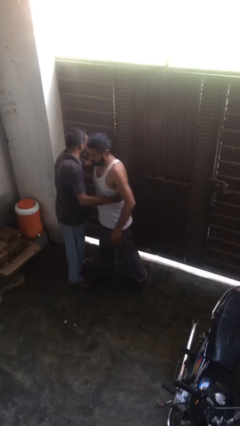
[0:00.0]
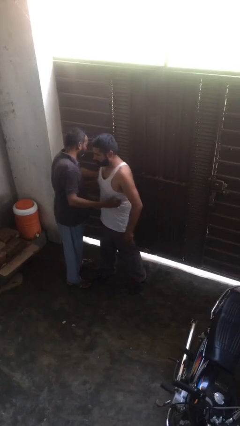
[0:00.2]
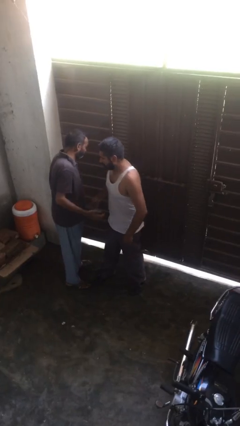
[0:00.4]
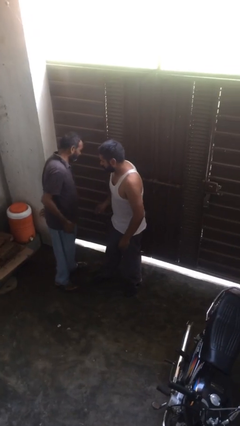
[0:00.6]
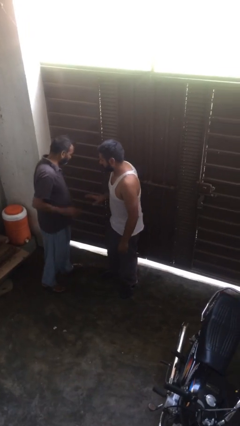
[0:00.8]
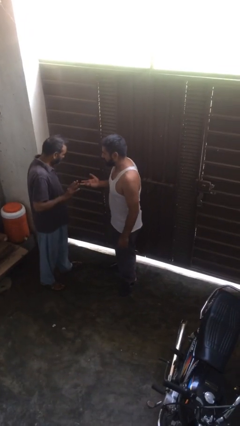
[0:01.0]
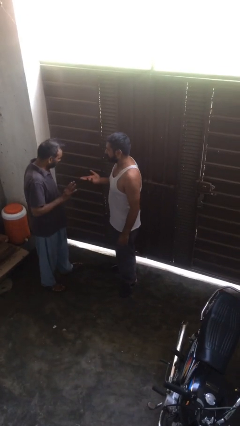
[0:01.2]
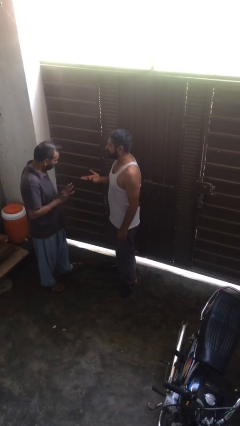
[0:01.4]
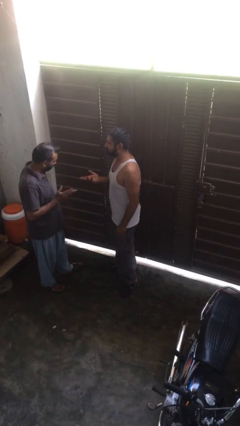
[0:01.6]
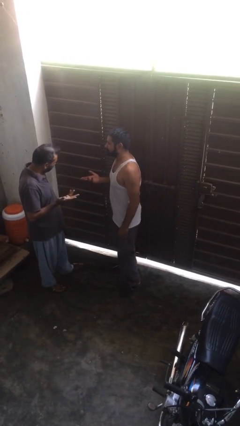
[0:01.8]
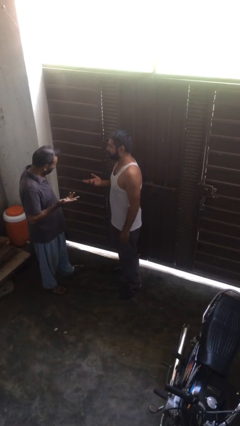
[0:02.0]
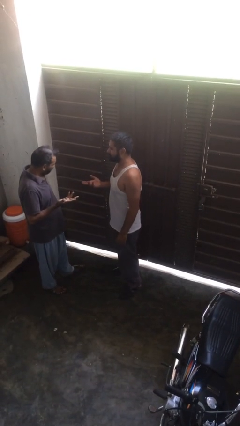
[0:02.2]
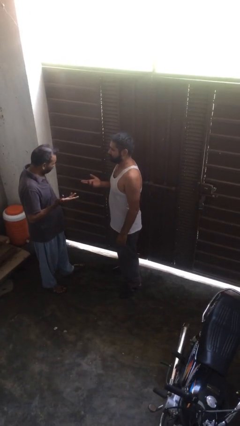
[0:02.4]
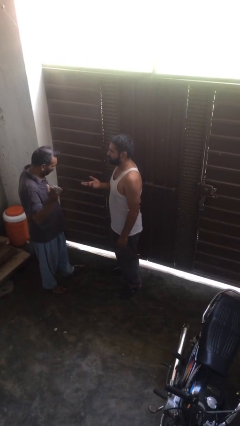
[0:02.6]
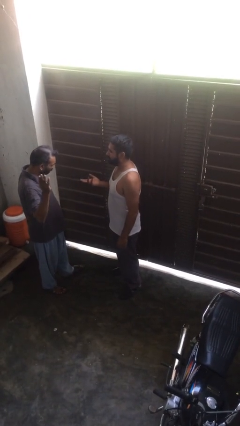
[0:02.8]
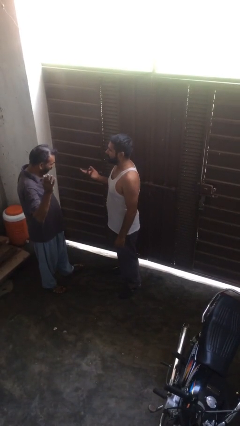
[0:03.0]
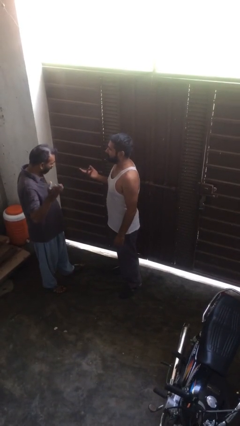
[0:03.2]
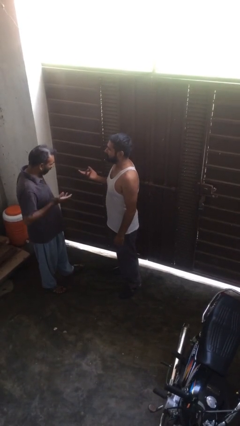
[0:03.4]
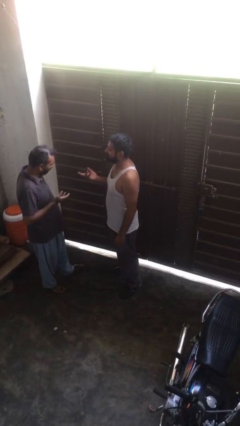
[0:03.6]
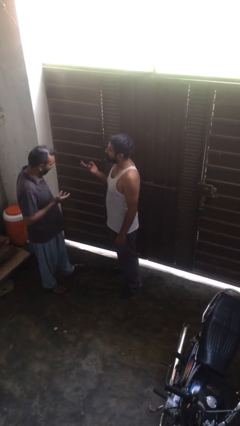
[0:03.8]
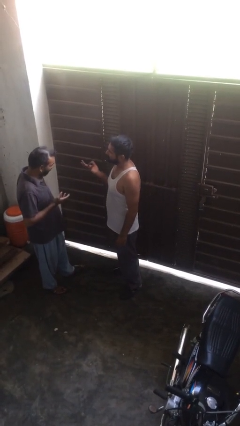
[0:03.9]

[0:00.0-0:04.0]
person talks to person

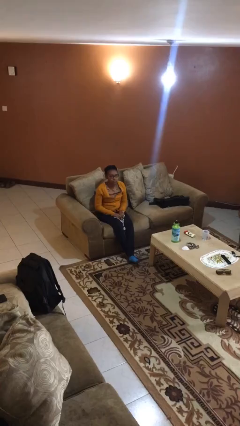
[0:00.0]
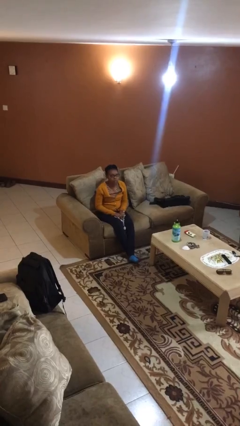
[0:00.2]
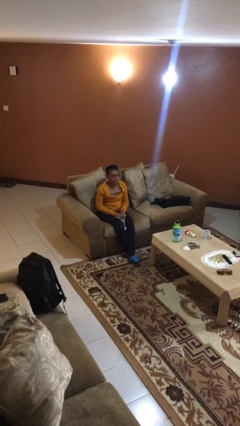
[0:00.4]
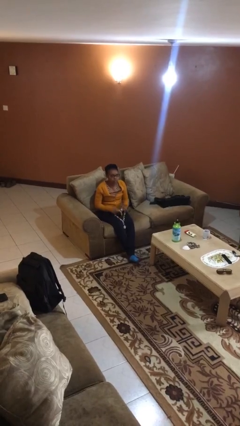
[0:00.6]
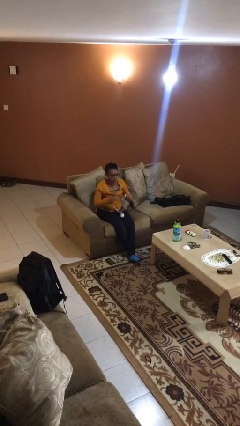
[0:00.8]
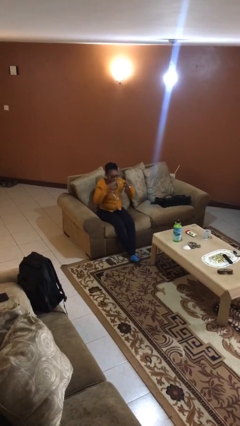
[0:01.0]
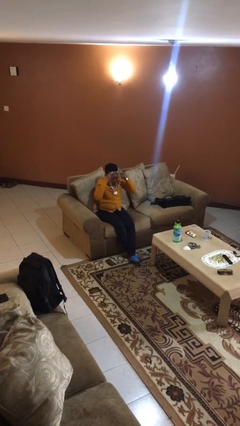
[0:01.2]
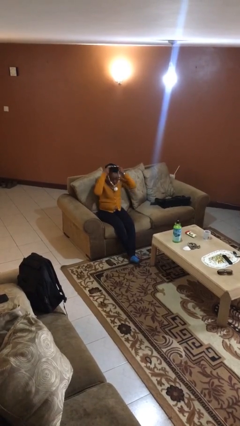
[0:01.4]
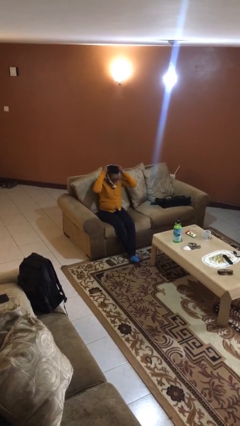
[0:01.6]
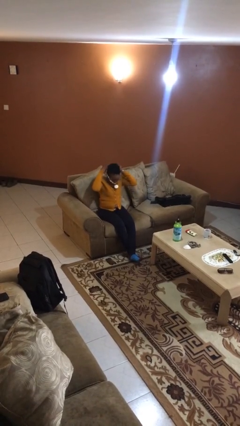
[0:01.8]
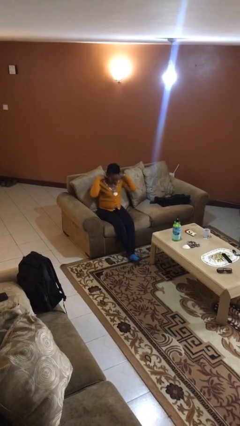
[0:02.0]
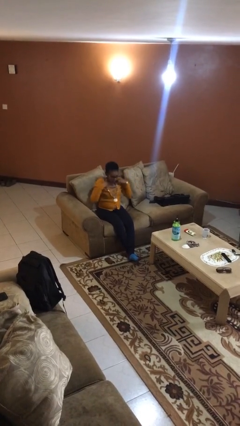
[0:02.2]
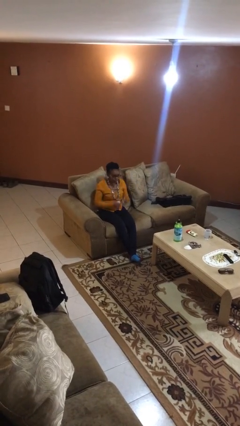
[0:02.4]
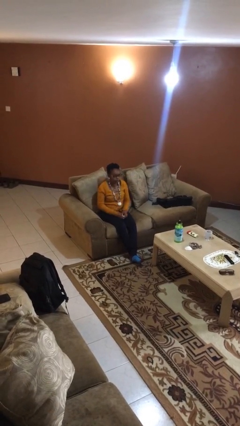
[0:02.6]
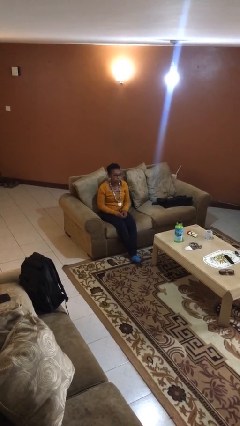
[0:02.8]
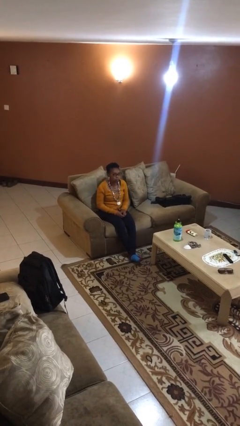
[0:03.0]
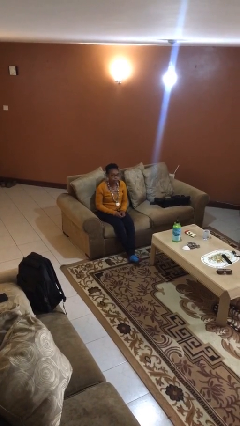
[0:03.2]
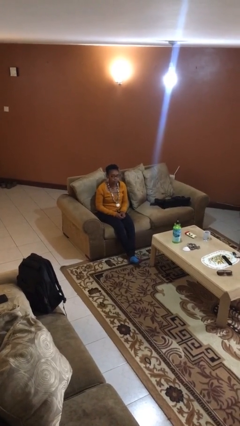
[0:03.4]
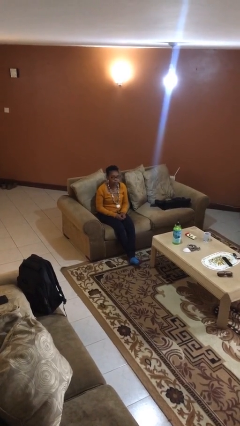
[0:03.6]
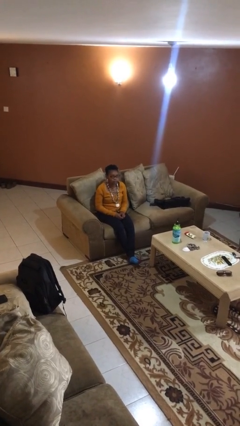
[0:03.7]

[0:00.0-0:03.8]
person puts on necklace

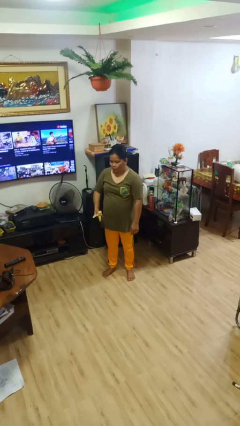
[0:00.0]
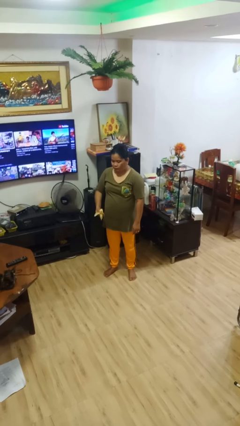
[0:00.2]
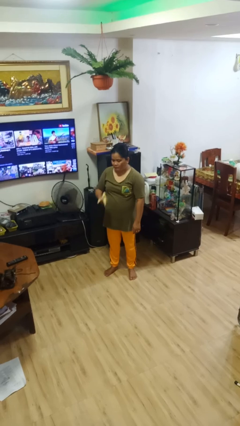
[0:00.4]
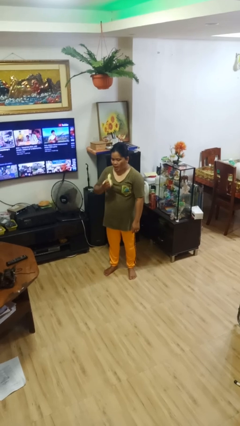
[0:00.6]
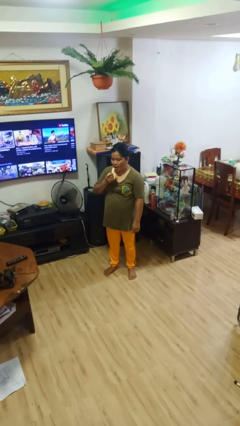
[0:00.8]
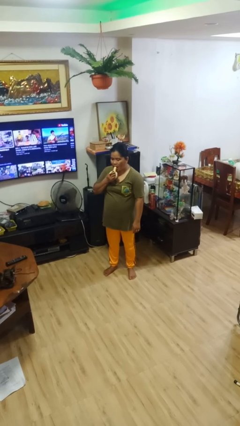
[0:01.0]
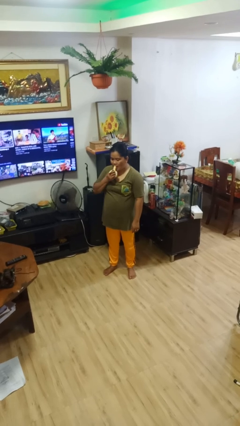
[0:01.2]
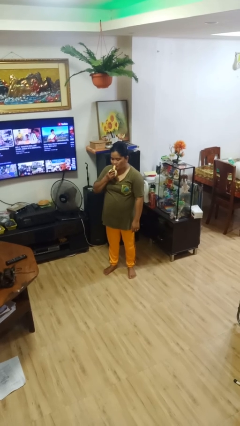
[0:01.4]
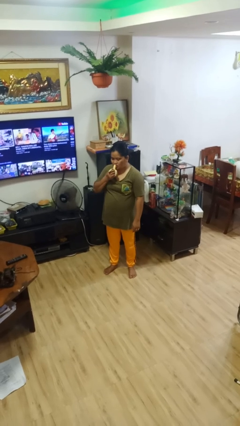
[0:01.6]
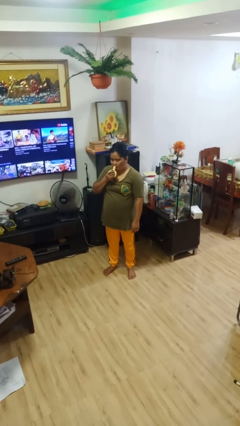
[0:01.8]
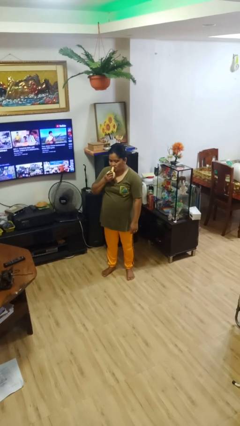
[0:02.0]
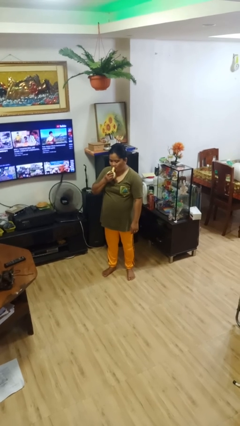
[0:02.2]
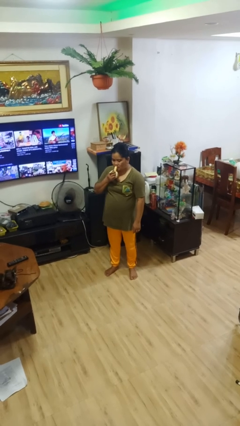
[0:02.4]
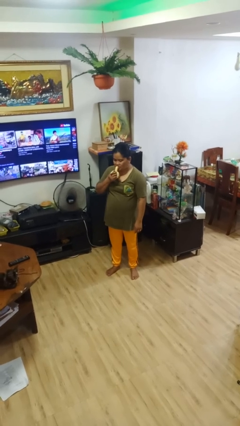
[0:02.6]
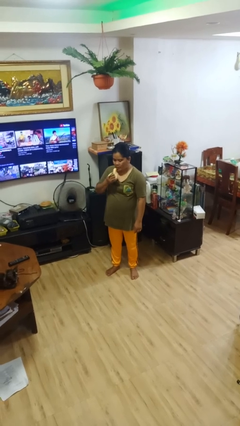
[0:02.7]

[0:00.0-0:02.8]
person eats banana

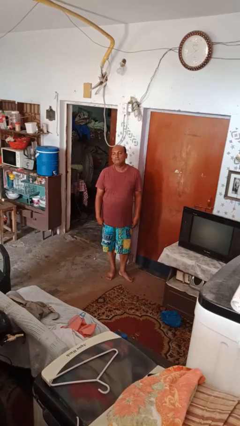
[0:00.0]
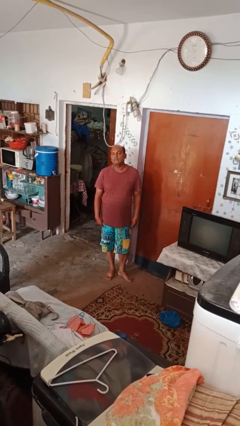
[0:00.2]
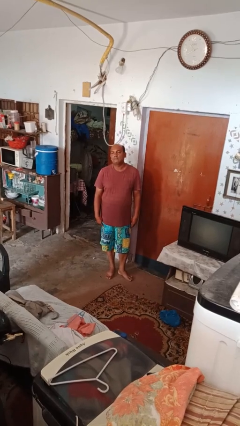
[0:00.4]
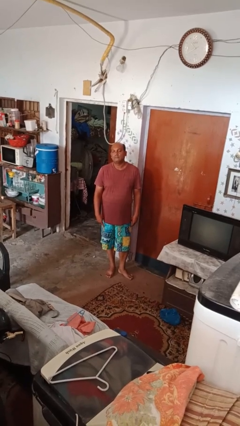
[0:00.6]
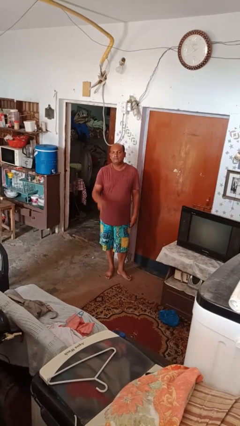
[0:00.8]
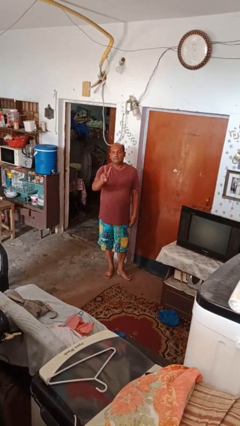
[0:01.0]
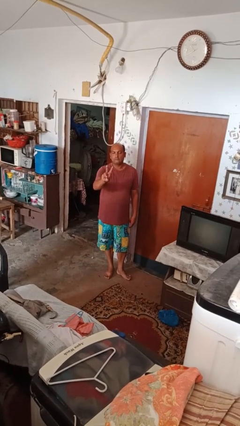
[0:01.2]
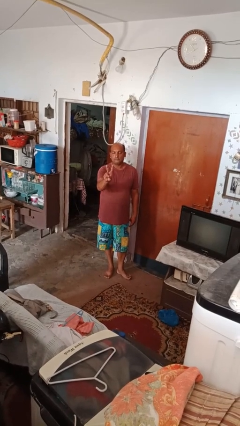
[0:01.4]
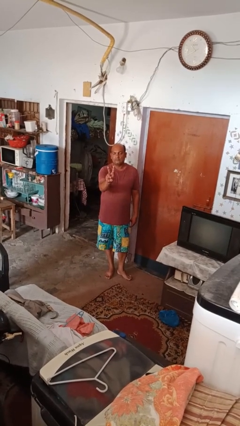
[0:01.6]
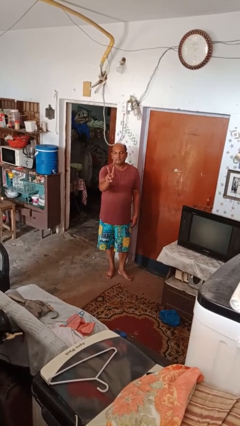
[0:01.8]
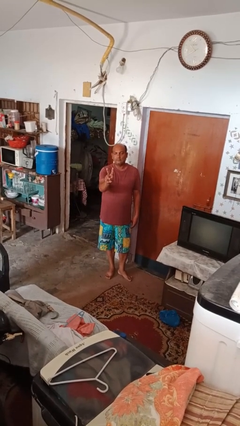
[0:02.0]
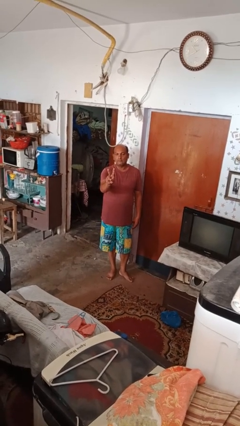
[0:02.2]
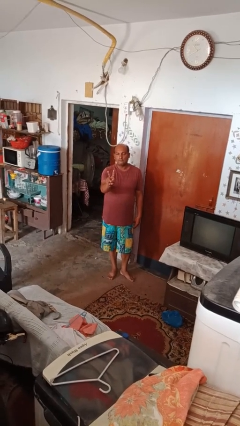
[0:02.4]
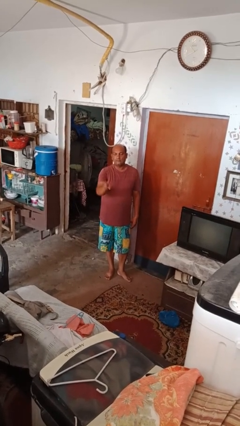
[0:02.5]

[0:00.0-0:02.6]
person gestures peace

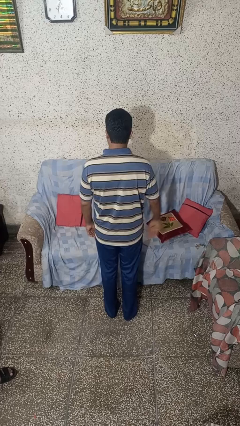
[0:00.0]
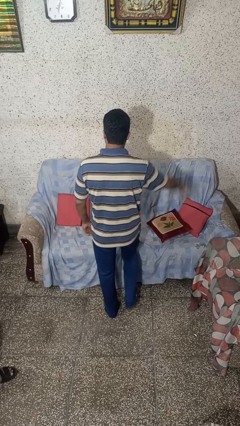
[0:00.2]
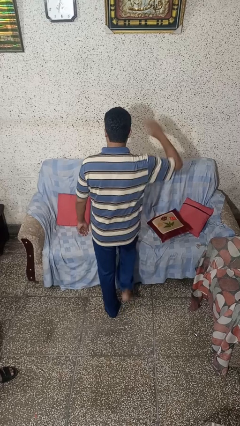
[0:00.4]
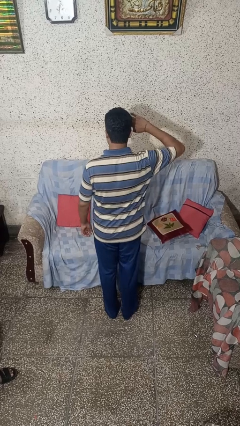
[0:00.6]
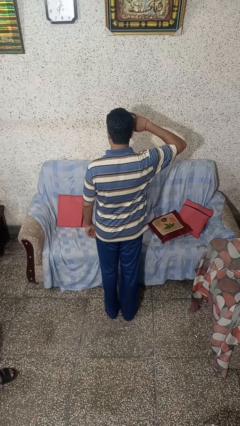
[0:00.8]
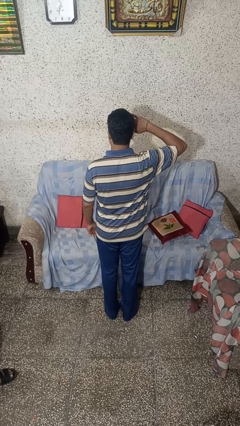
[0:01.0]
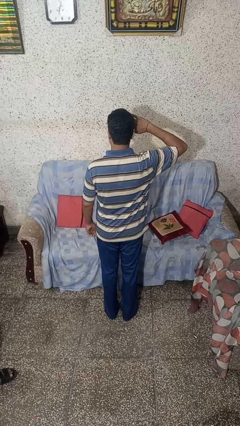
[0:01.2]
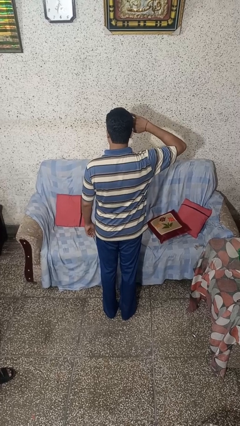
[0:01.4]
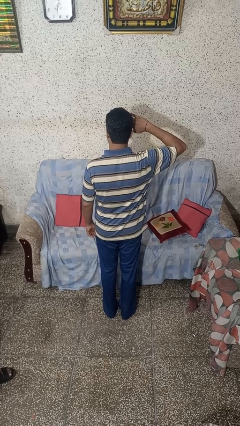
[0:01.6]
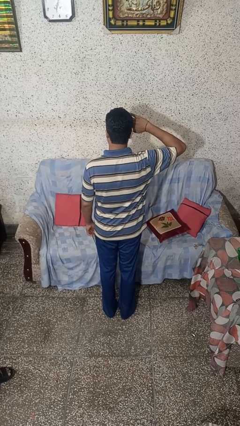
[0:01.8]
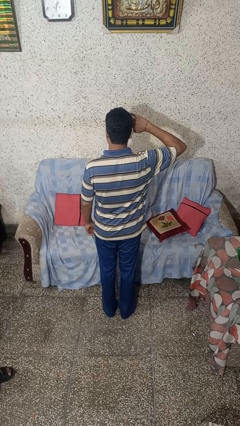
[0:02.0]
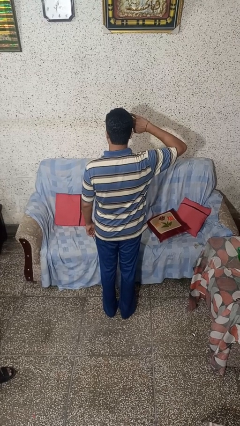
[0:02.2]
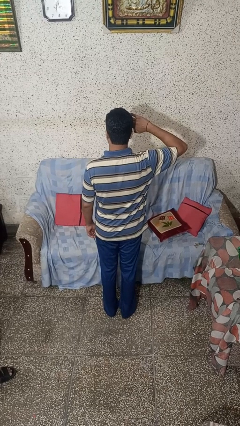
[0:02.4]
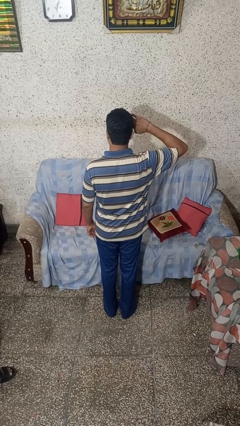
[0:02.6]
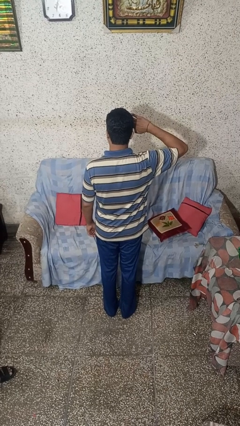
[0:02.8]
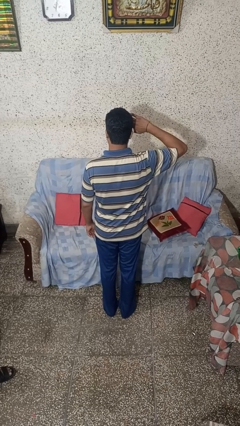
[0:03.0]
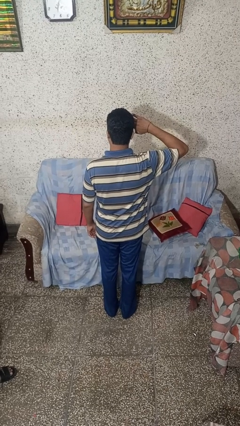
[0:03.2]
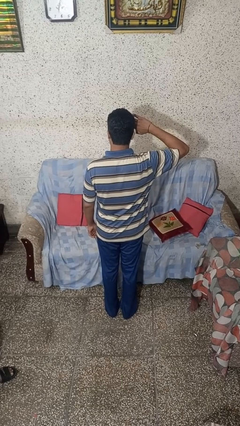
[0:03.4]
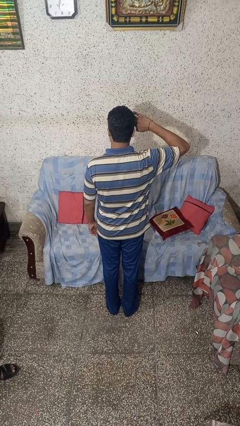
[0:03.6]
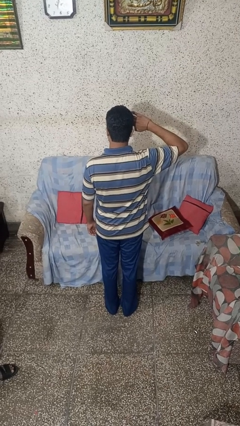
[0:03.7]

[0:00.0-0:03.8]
person salutes

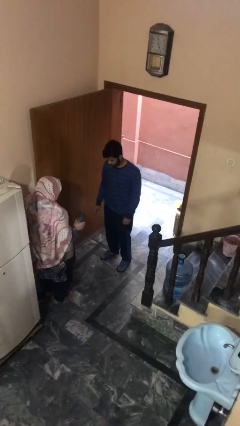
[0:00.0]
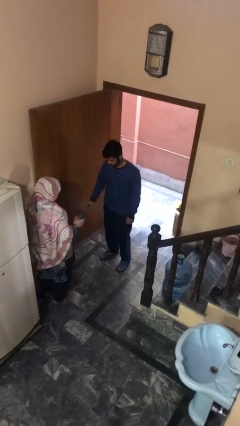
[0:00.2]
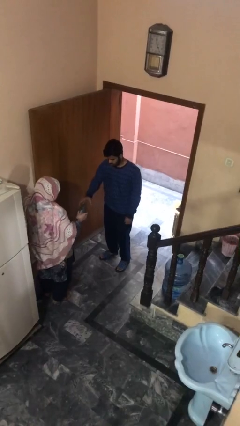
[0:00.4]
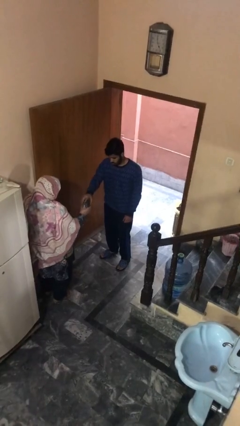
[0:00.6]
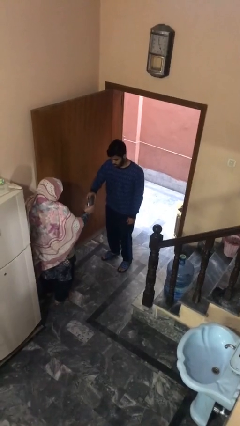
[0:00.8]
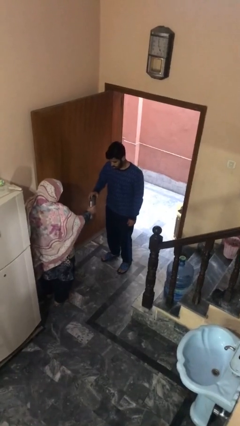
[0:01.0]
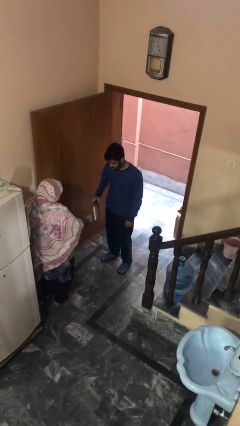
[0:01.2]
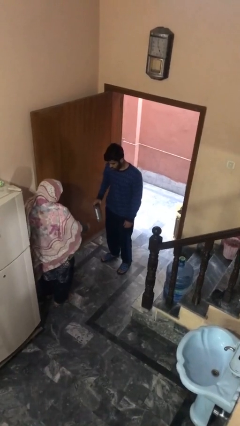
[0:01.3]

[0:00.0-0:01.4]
person transfers object to person
